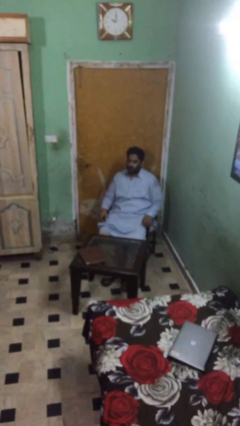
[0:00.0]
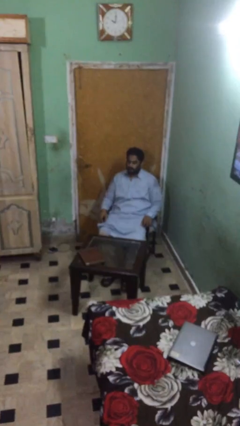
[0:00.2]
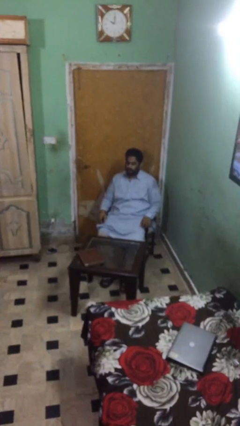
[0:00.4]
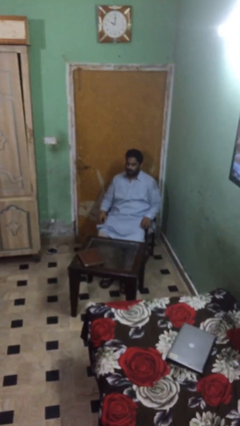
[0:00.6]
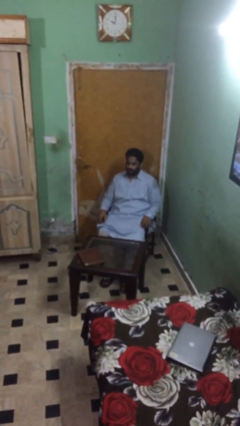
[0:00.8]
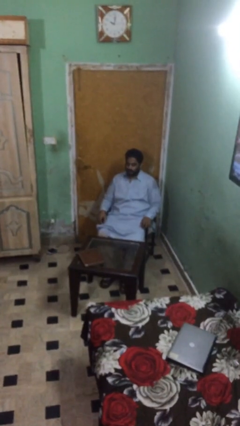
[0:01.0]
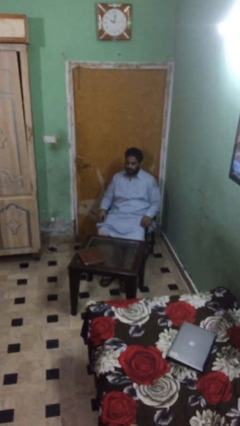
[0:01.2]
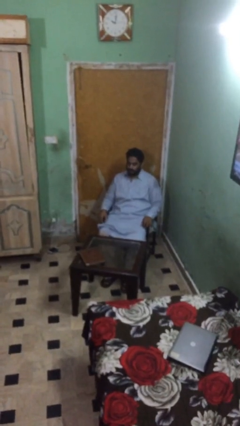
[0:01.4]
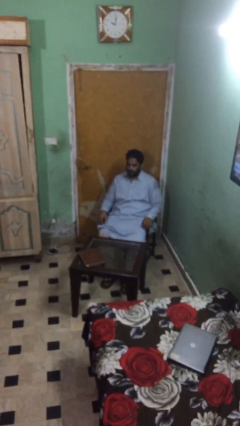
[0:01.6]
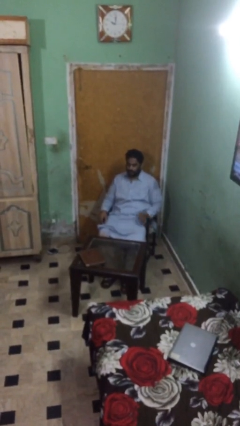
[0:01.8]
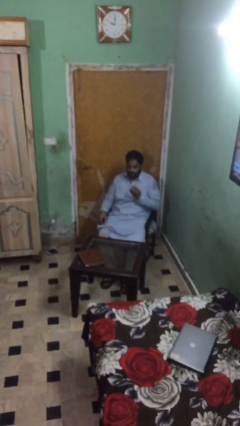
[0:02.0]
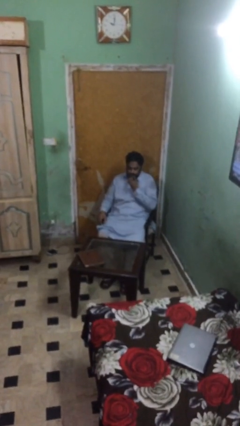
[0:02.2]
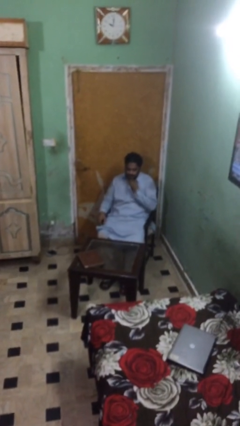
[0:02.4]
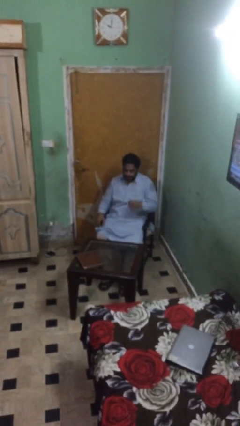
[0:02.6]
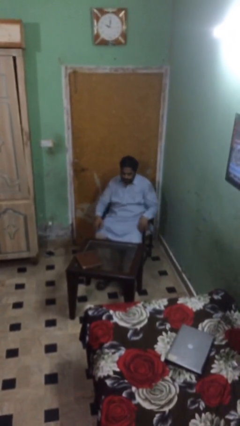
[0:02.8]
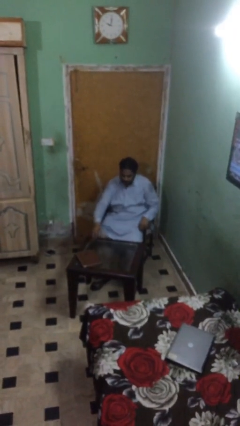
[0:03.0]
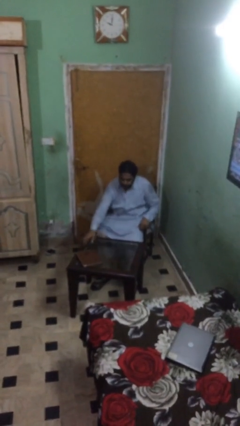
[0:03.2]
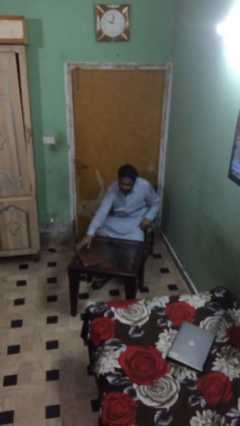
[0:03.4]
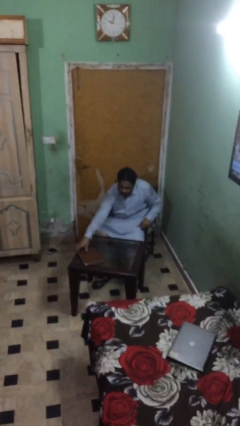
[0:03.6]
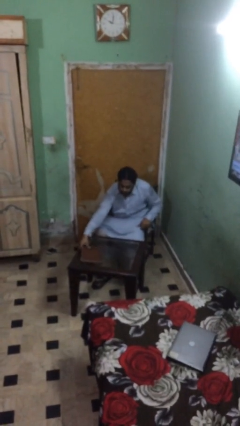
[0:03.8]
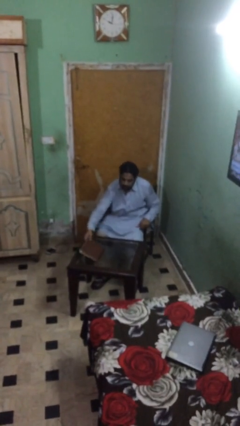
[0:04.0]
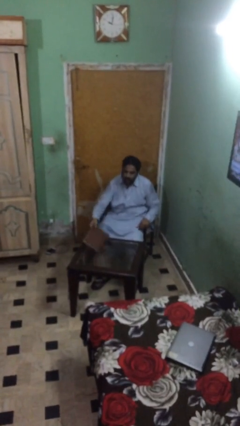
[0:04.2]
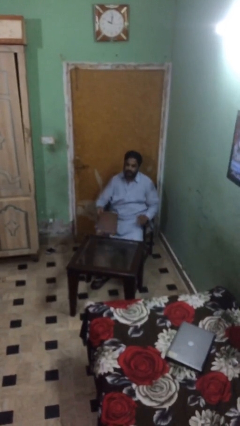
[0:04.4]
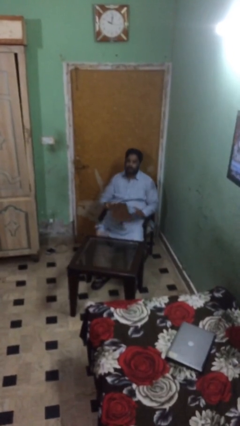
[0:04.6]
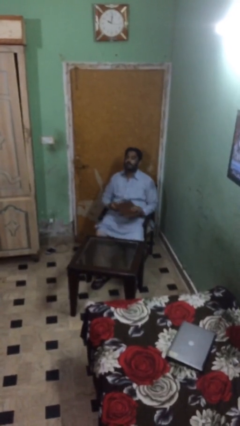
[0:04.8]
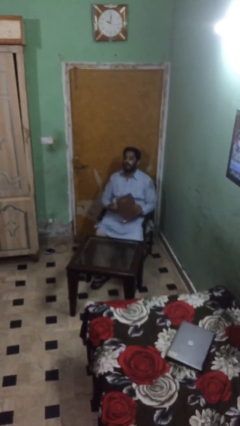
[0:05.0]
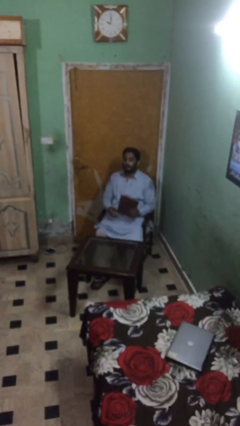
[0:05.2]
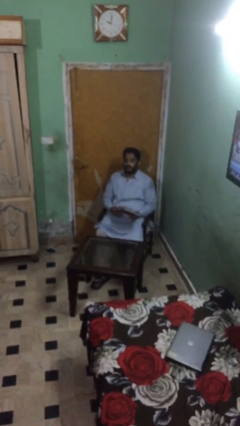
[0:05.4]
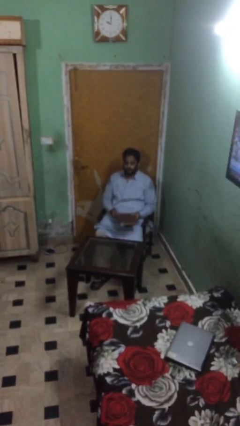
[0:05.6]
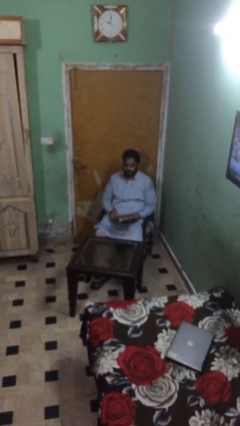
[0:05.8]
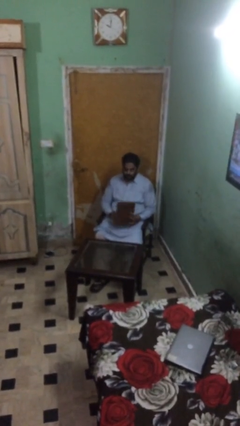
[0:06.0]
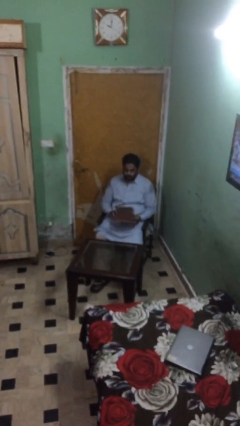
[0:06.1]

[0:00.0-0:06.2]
person picks up object from table

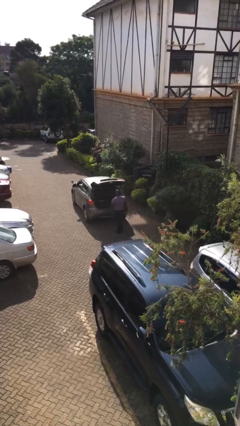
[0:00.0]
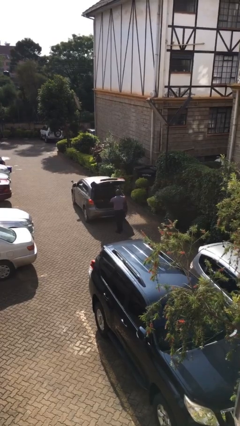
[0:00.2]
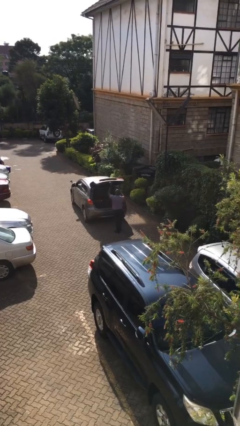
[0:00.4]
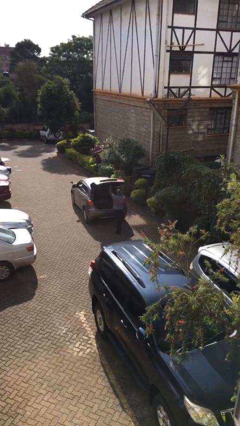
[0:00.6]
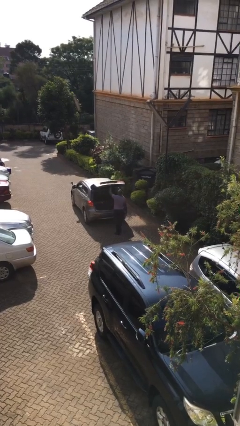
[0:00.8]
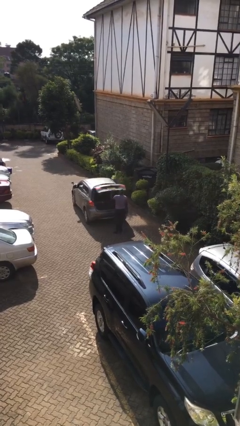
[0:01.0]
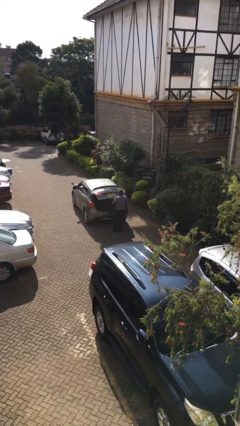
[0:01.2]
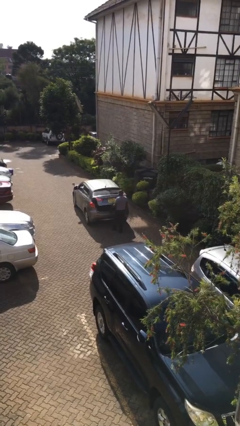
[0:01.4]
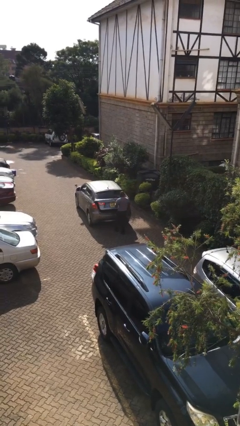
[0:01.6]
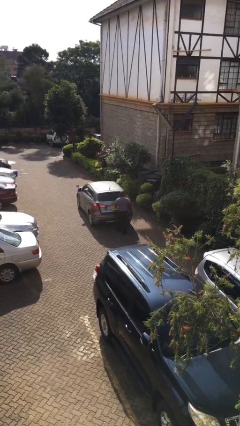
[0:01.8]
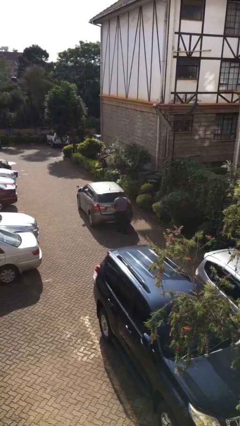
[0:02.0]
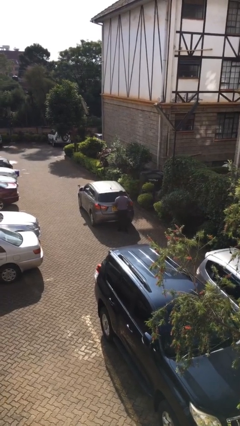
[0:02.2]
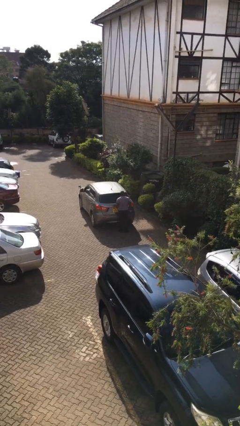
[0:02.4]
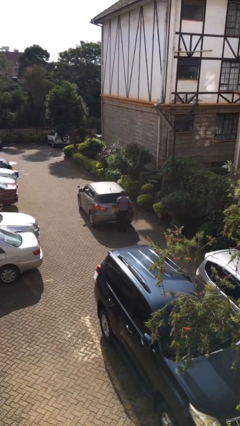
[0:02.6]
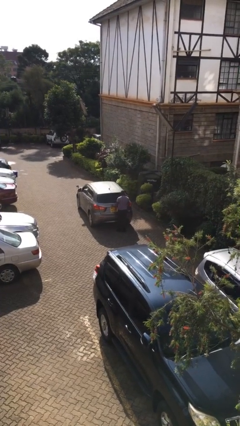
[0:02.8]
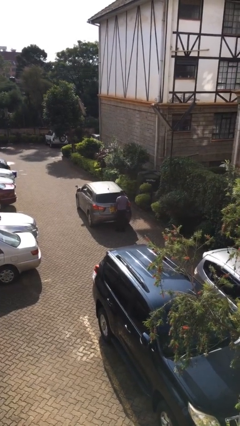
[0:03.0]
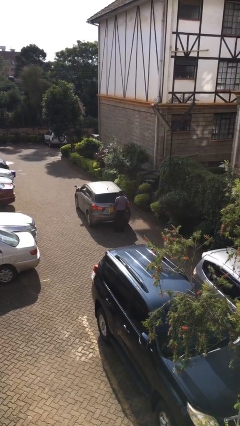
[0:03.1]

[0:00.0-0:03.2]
person closes car trunk

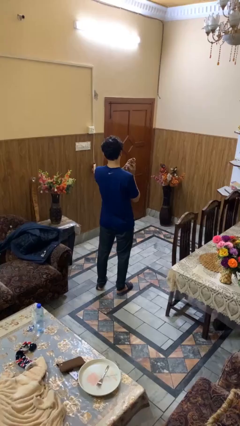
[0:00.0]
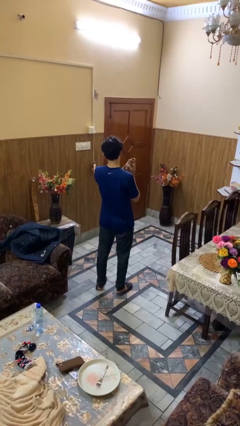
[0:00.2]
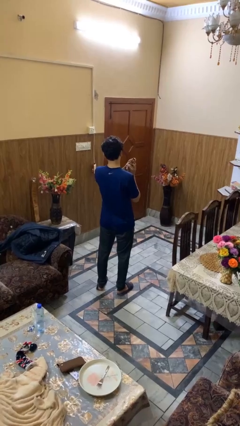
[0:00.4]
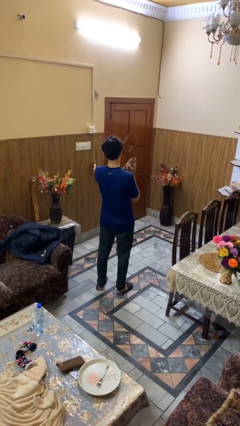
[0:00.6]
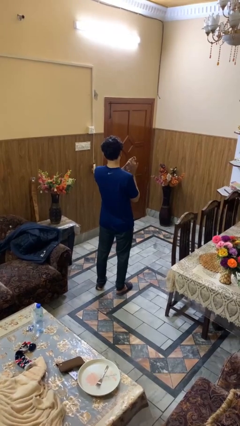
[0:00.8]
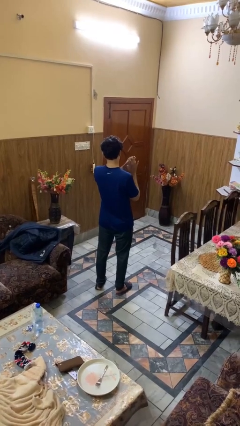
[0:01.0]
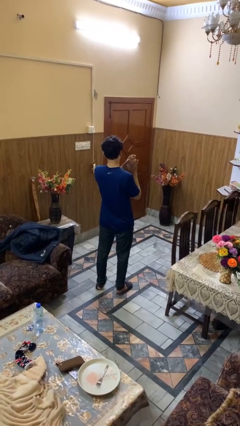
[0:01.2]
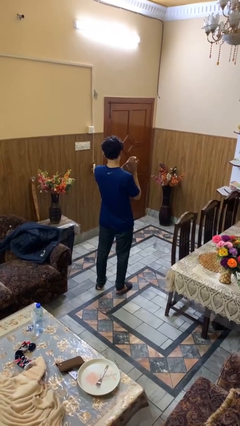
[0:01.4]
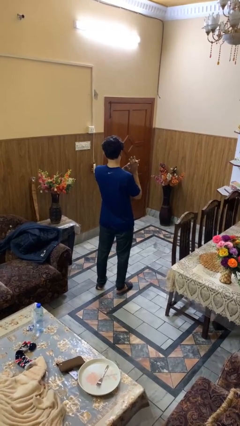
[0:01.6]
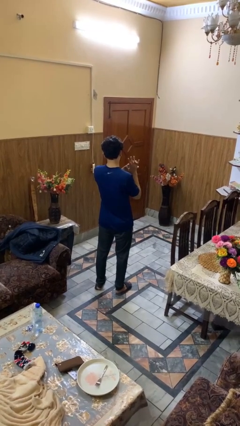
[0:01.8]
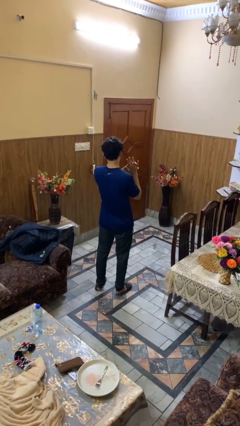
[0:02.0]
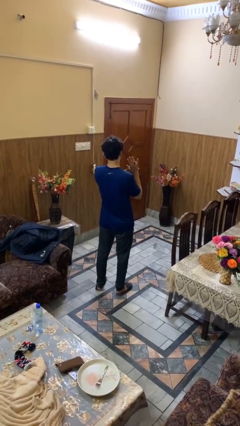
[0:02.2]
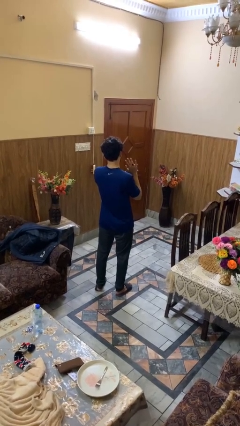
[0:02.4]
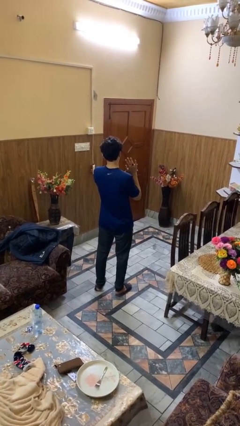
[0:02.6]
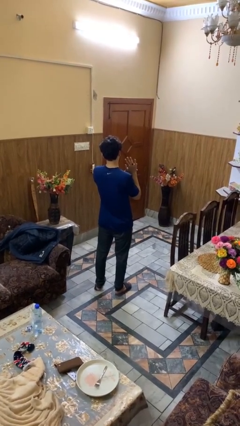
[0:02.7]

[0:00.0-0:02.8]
person puts on ring

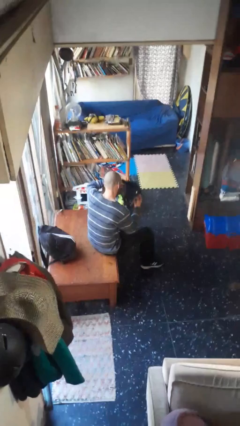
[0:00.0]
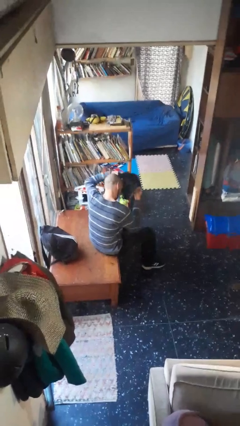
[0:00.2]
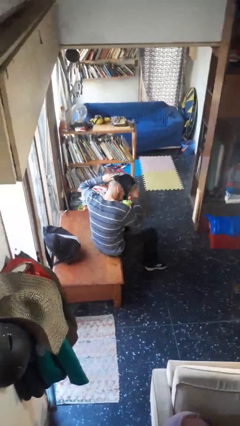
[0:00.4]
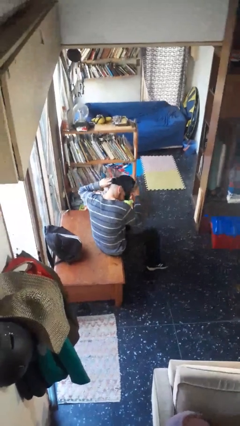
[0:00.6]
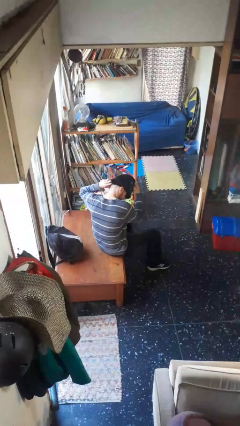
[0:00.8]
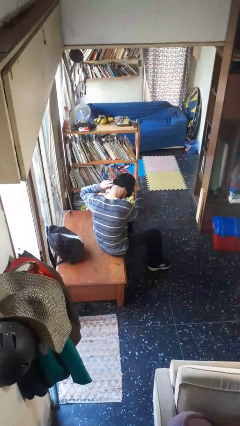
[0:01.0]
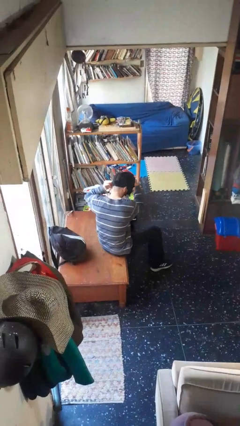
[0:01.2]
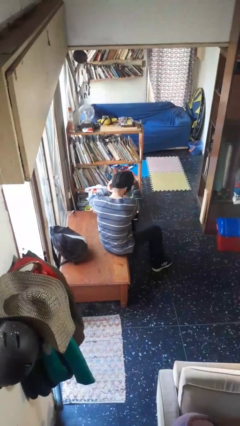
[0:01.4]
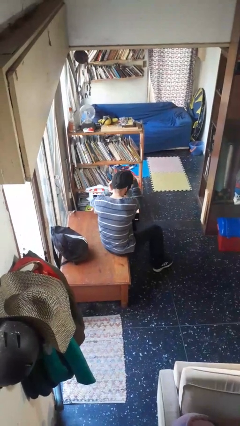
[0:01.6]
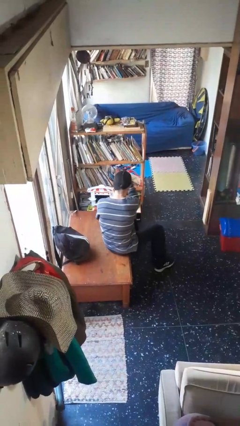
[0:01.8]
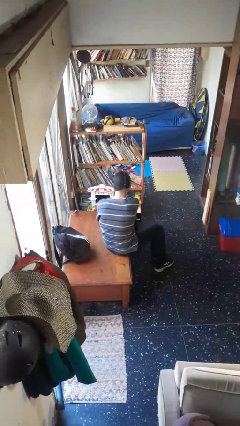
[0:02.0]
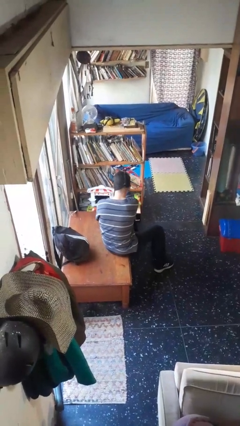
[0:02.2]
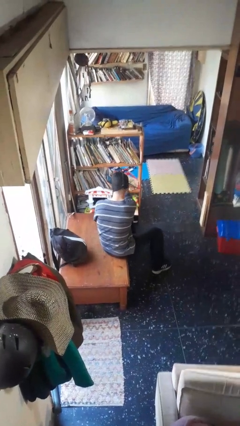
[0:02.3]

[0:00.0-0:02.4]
person puts on facemask

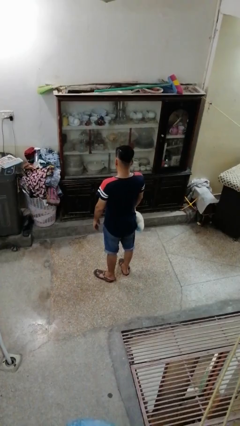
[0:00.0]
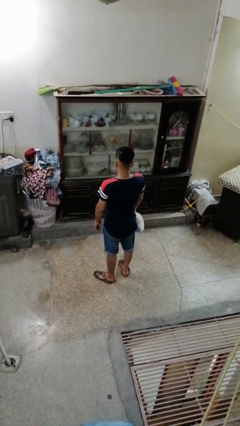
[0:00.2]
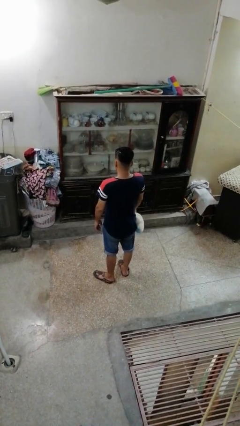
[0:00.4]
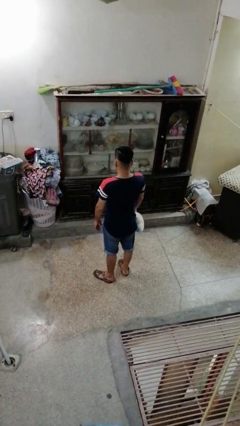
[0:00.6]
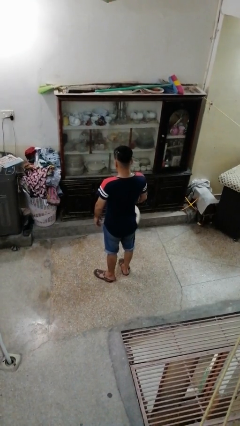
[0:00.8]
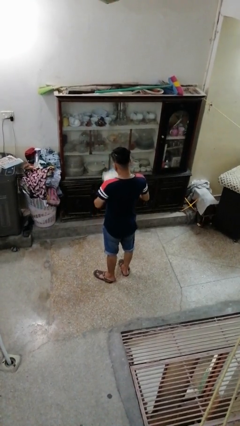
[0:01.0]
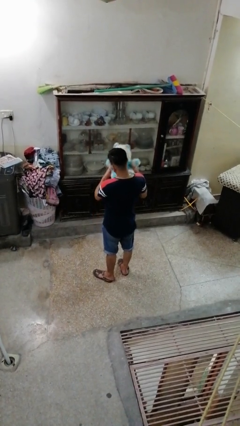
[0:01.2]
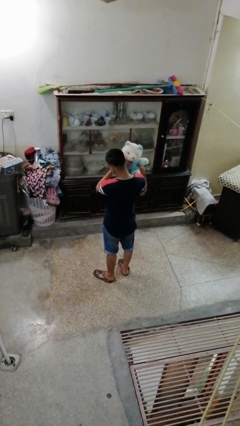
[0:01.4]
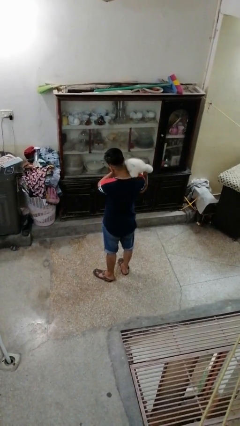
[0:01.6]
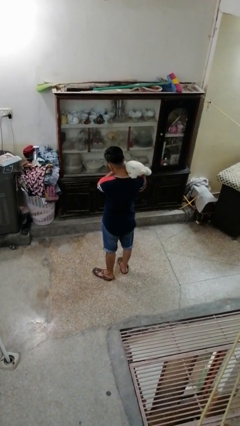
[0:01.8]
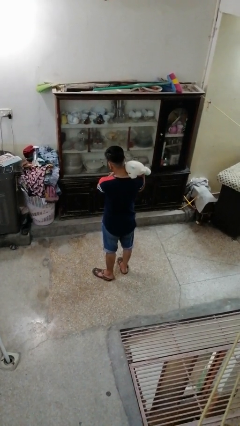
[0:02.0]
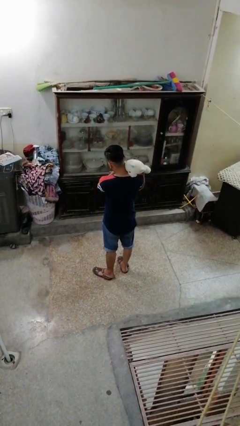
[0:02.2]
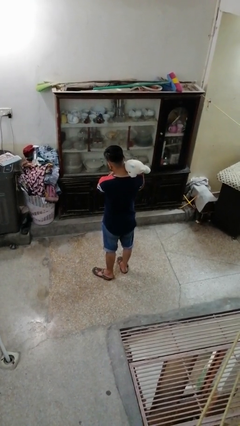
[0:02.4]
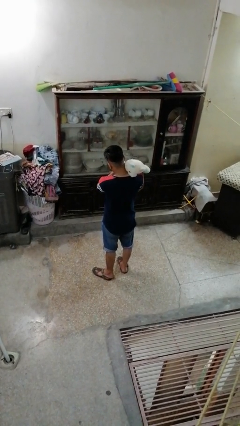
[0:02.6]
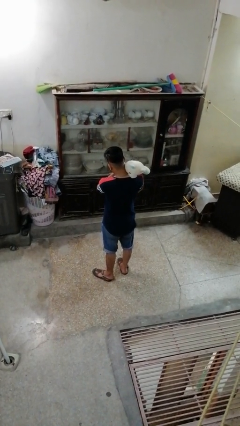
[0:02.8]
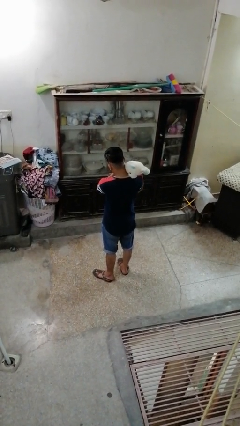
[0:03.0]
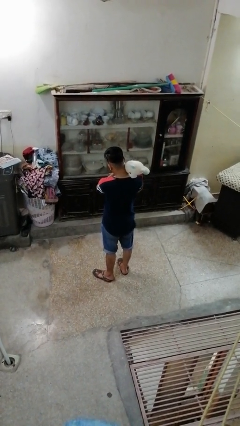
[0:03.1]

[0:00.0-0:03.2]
person hugs stuffed animal
